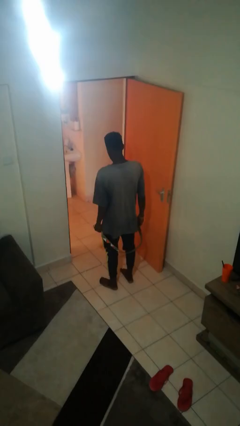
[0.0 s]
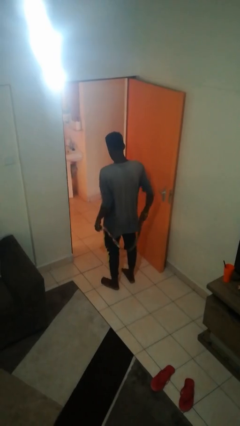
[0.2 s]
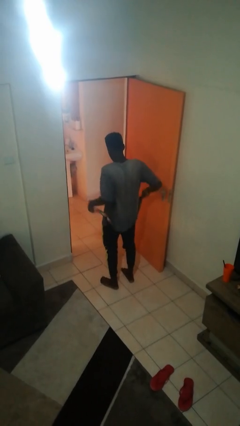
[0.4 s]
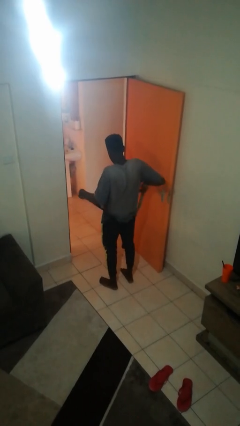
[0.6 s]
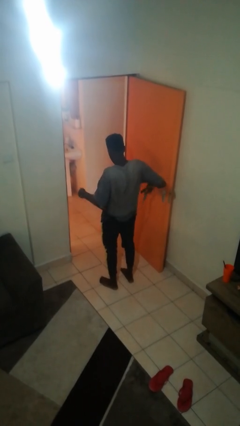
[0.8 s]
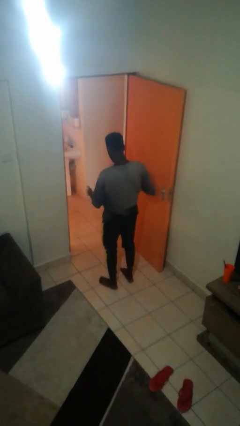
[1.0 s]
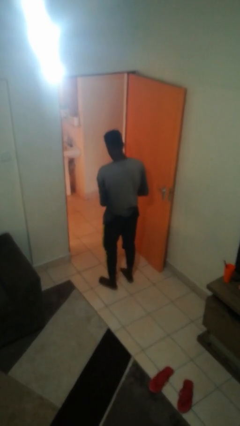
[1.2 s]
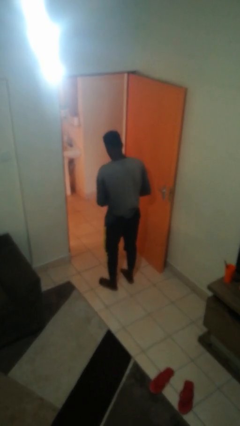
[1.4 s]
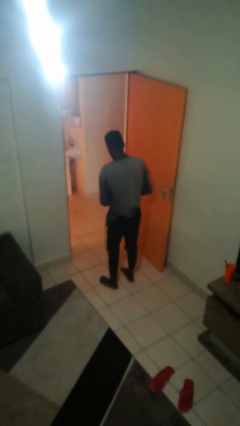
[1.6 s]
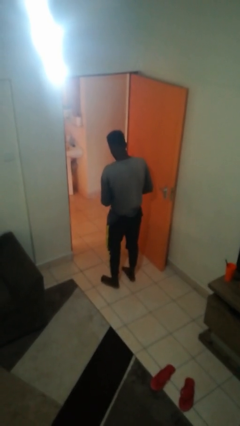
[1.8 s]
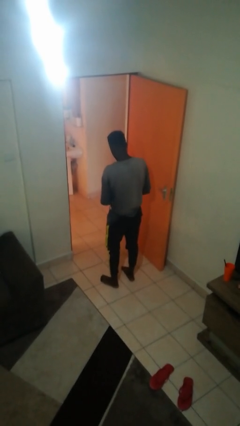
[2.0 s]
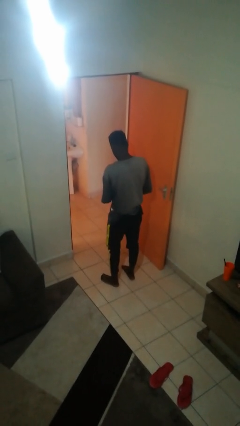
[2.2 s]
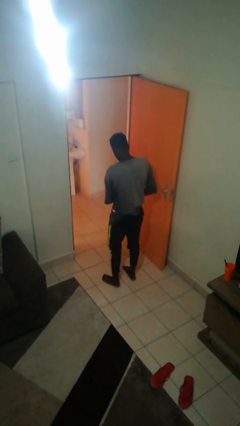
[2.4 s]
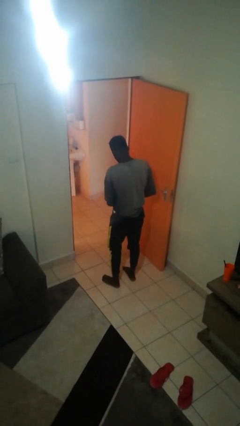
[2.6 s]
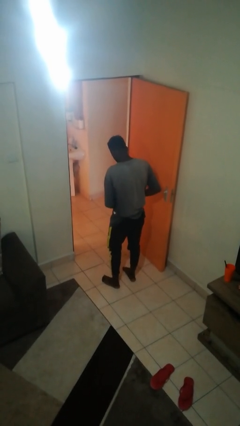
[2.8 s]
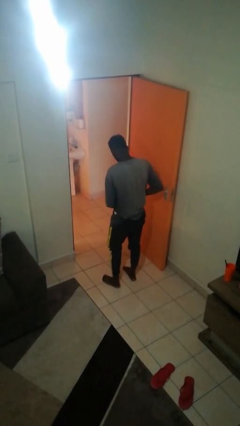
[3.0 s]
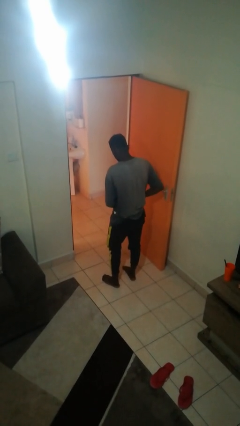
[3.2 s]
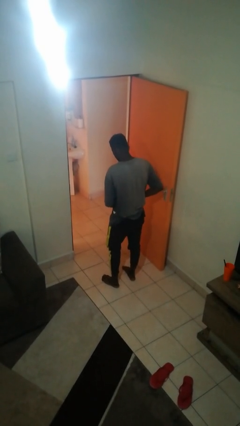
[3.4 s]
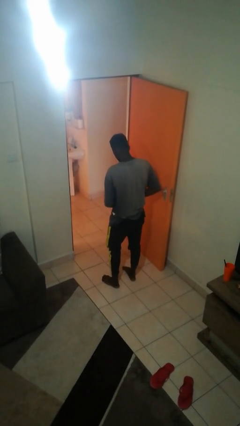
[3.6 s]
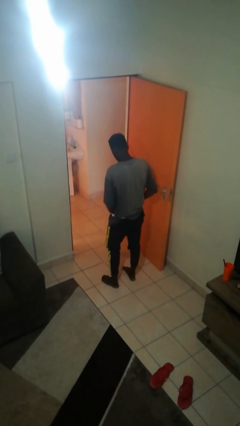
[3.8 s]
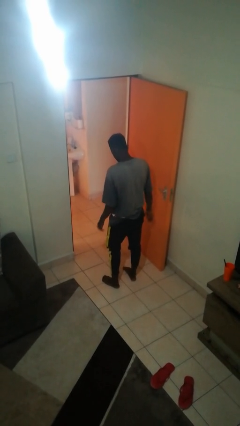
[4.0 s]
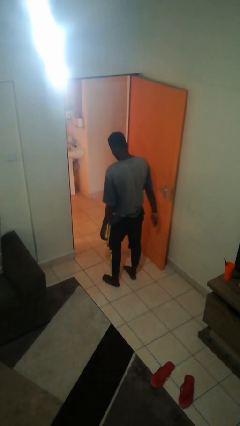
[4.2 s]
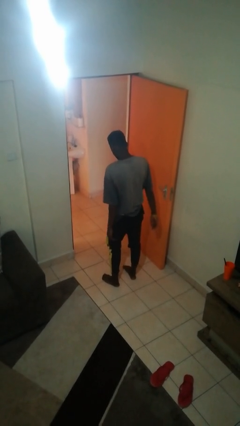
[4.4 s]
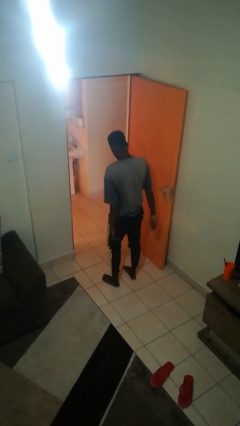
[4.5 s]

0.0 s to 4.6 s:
person puts on belt

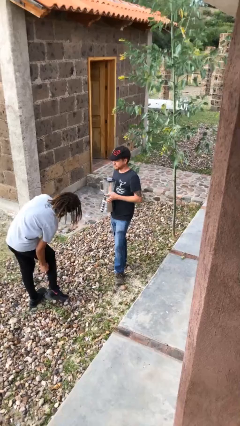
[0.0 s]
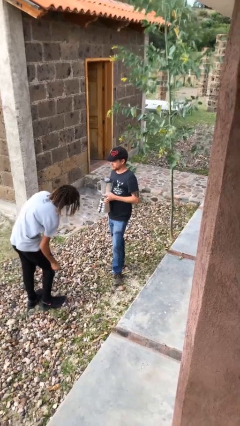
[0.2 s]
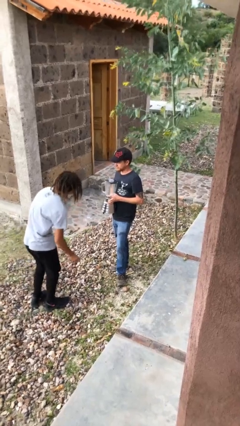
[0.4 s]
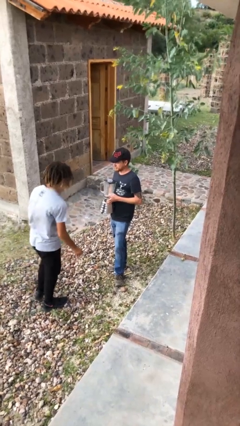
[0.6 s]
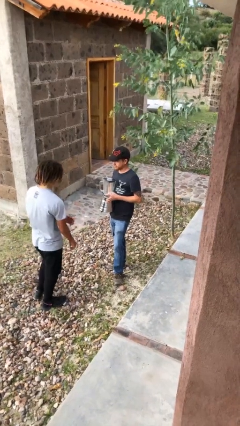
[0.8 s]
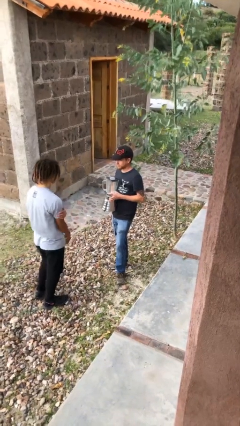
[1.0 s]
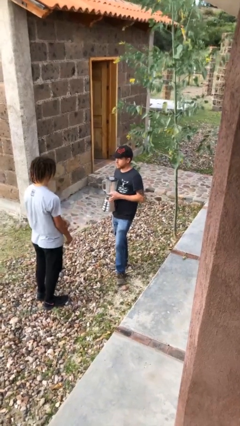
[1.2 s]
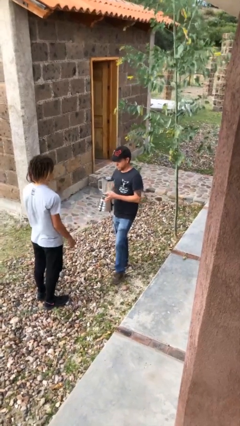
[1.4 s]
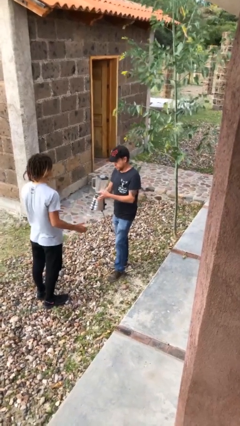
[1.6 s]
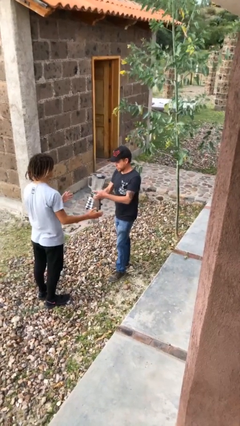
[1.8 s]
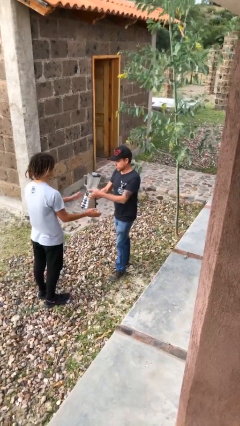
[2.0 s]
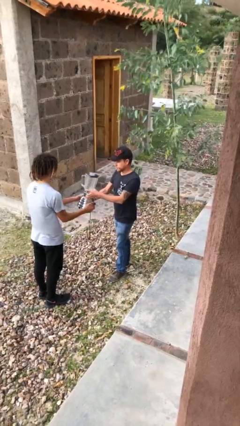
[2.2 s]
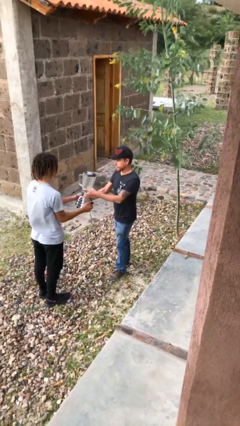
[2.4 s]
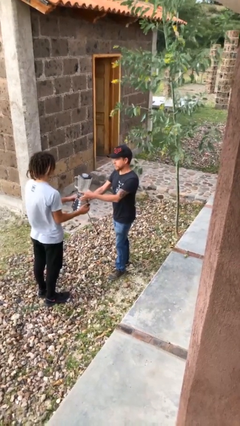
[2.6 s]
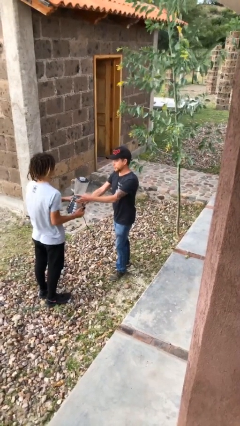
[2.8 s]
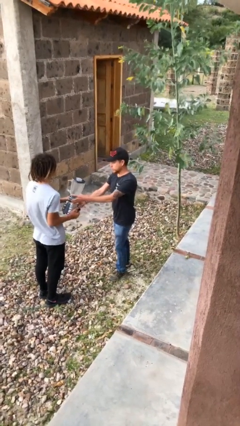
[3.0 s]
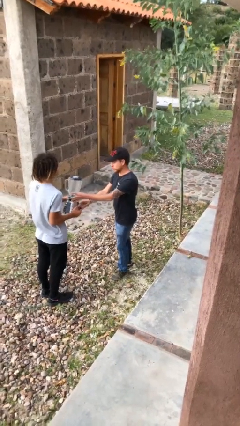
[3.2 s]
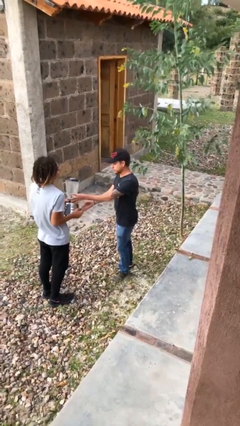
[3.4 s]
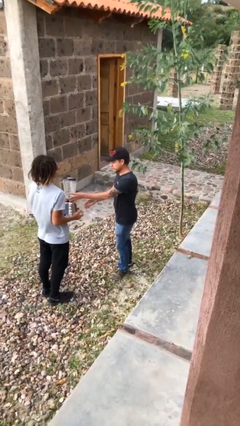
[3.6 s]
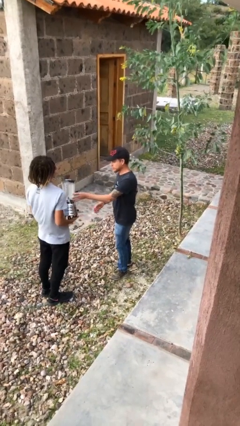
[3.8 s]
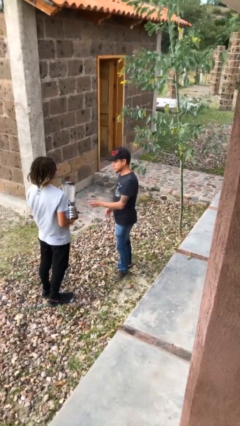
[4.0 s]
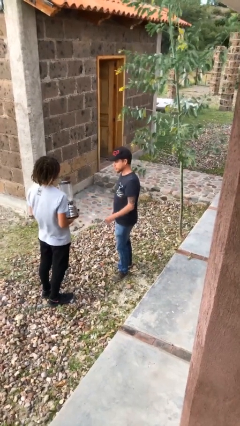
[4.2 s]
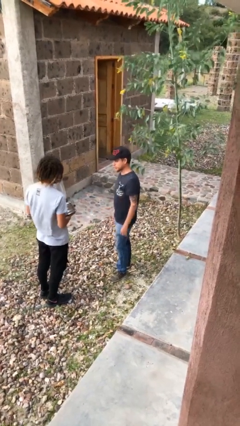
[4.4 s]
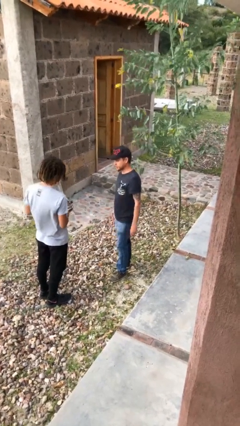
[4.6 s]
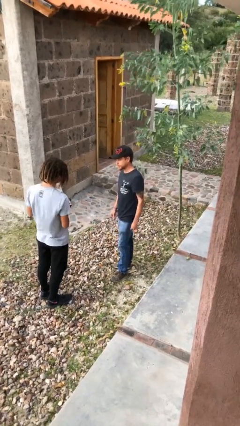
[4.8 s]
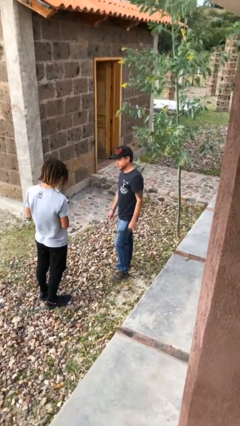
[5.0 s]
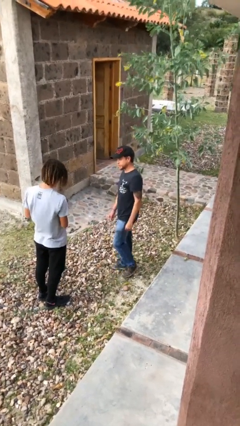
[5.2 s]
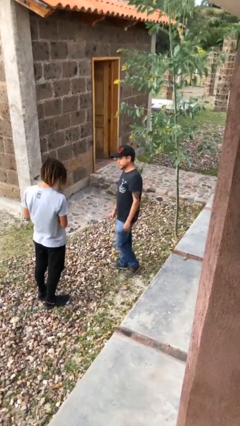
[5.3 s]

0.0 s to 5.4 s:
person transfers object to person

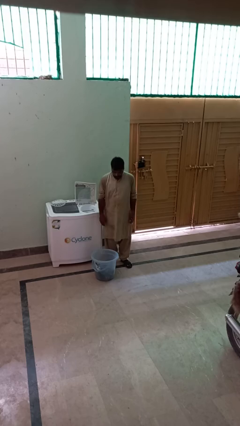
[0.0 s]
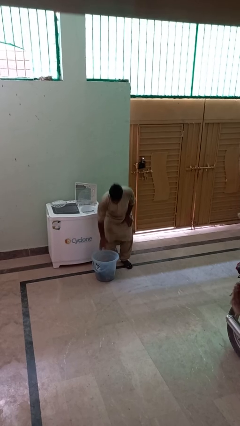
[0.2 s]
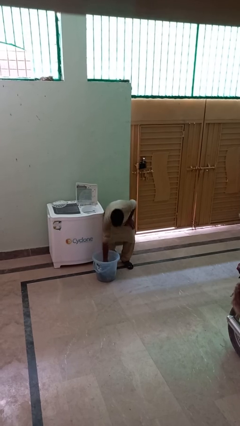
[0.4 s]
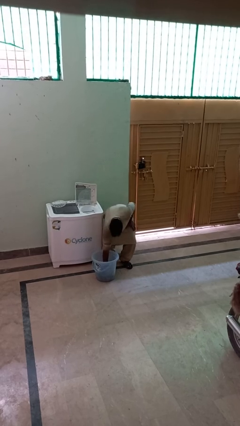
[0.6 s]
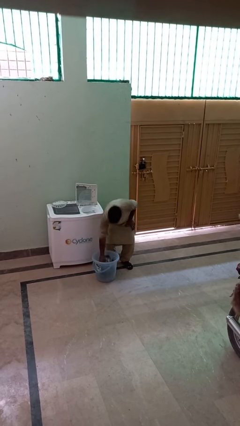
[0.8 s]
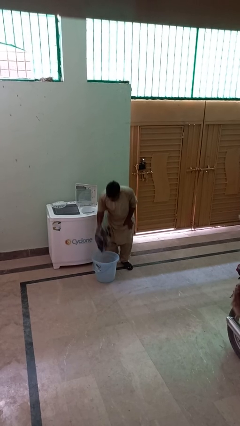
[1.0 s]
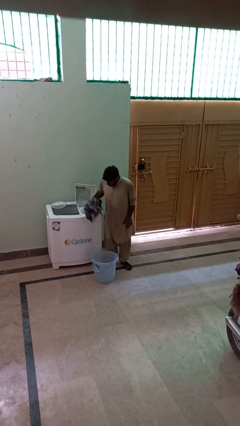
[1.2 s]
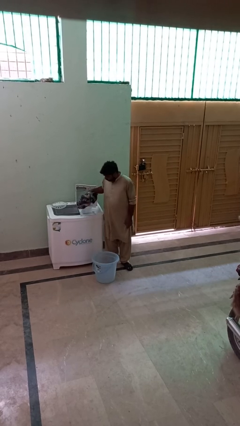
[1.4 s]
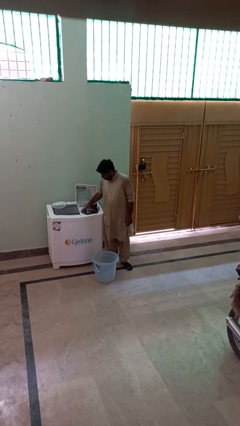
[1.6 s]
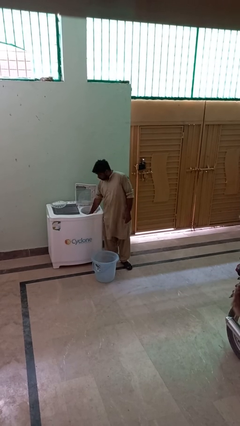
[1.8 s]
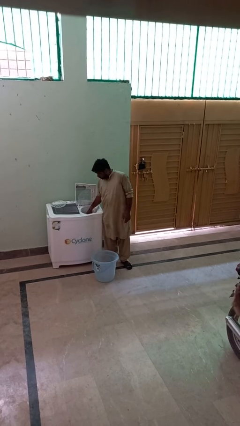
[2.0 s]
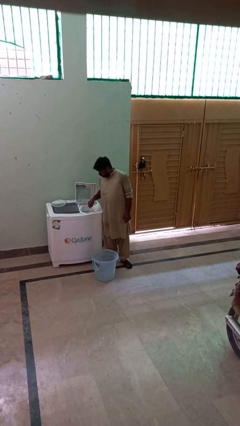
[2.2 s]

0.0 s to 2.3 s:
person loads dryer

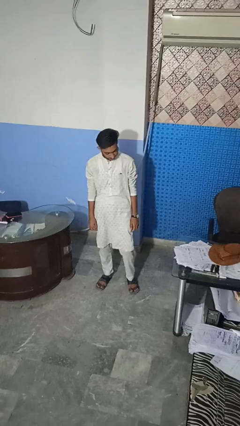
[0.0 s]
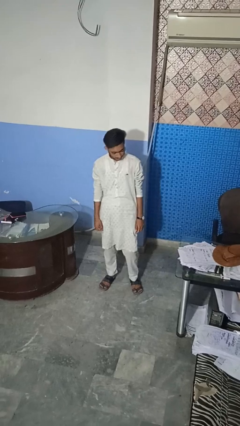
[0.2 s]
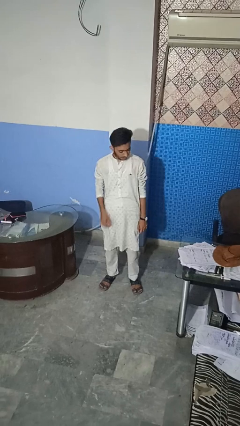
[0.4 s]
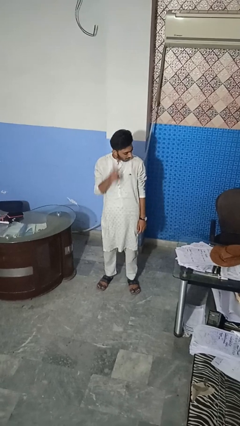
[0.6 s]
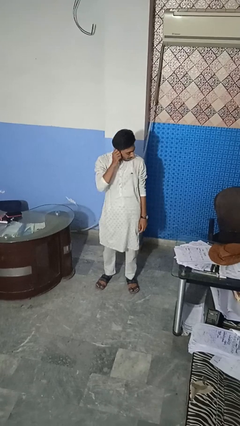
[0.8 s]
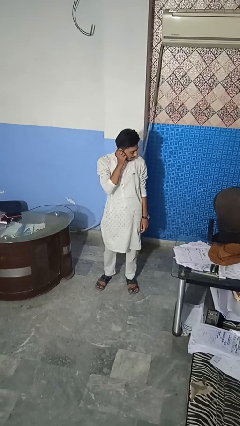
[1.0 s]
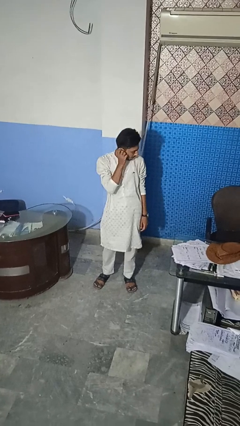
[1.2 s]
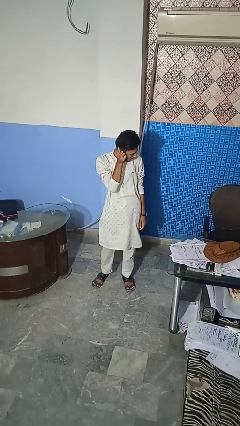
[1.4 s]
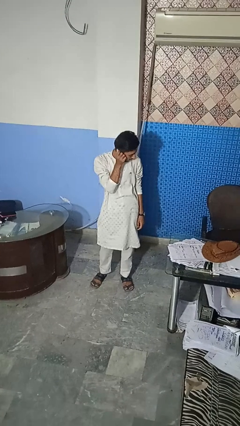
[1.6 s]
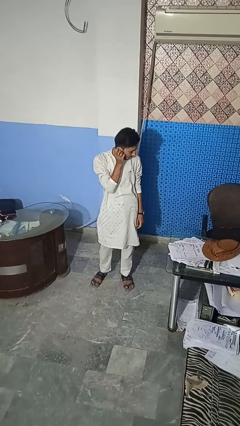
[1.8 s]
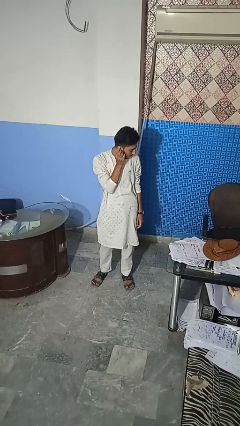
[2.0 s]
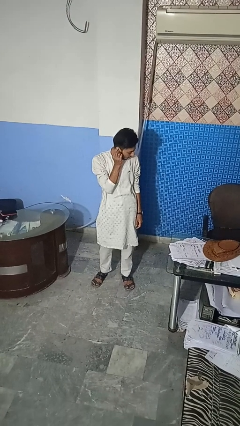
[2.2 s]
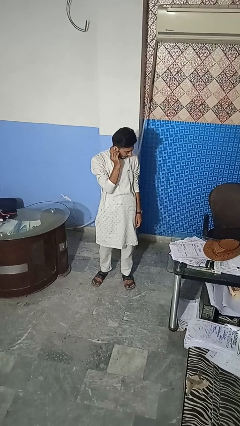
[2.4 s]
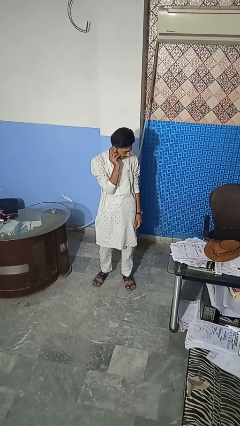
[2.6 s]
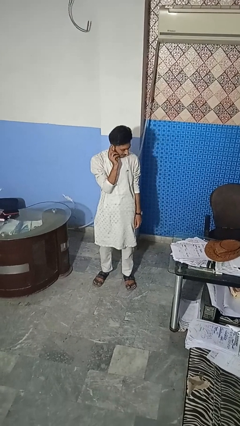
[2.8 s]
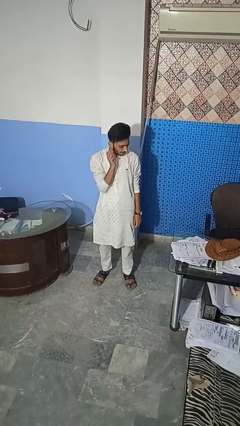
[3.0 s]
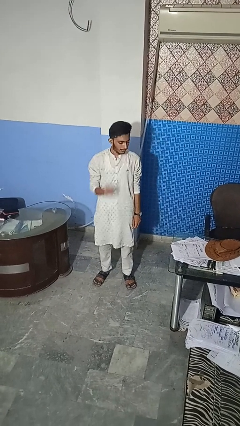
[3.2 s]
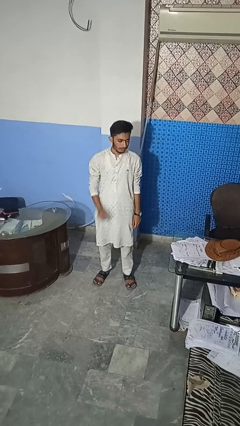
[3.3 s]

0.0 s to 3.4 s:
person touches earlobe

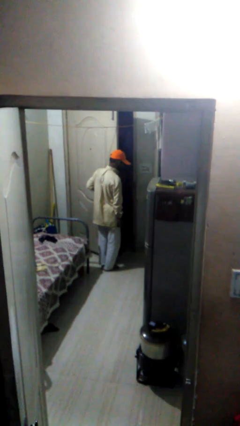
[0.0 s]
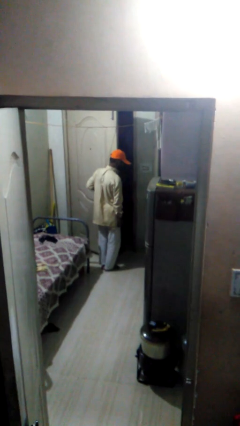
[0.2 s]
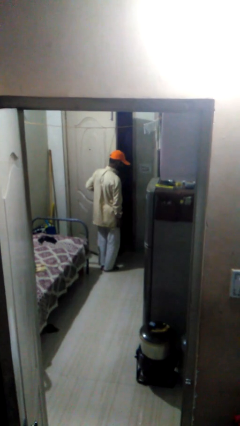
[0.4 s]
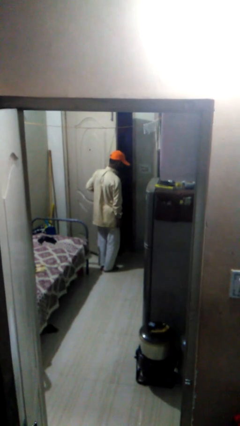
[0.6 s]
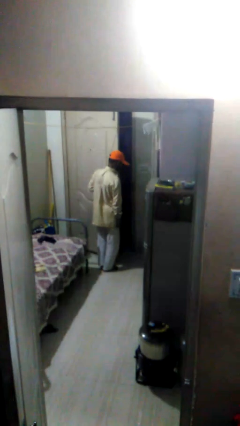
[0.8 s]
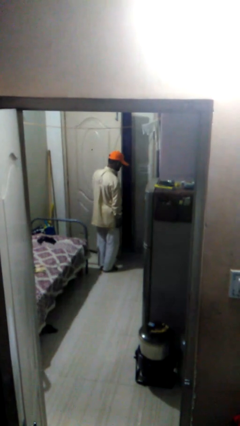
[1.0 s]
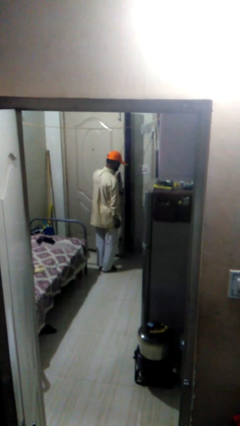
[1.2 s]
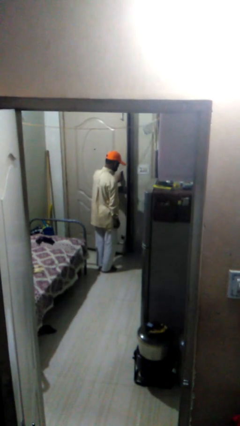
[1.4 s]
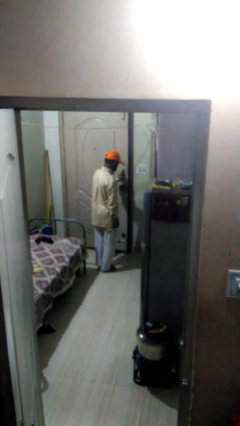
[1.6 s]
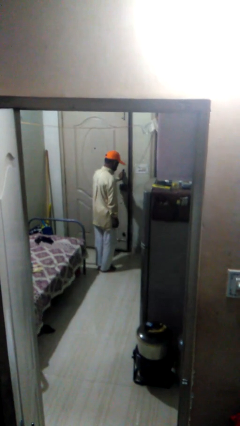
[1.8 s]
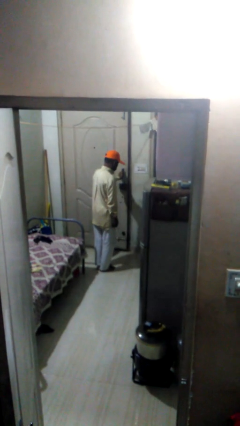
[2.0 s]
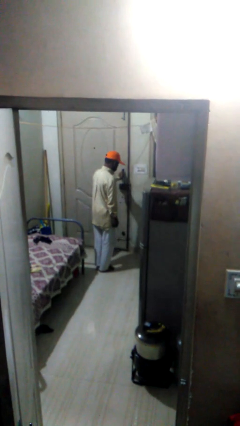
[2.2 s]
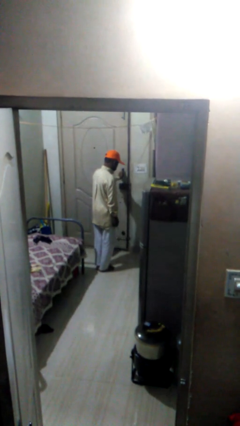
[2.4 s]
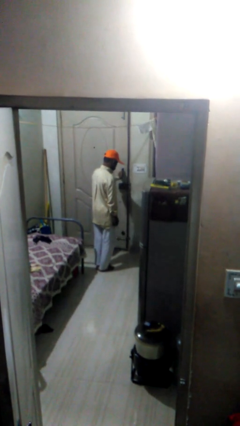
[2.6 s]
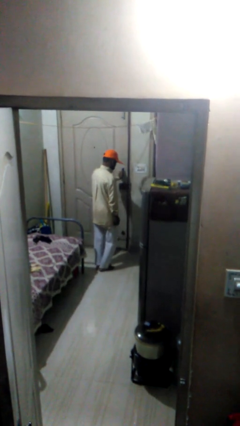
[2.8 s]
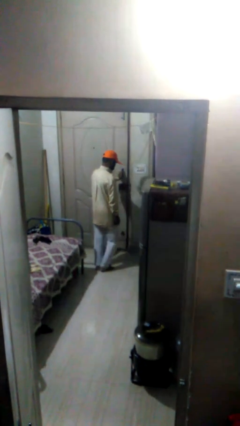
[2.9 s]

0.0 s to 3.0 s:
person closes facility door
